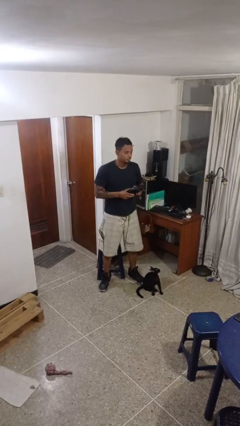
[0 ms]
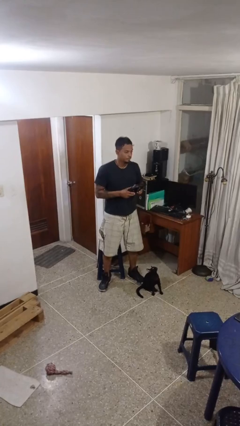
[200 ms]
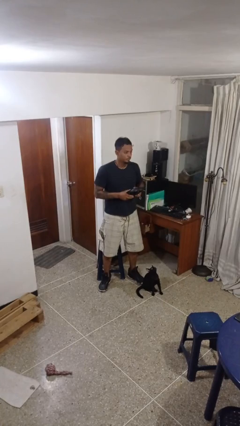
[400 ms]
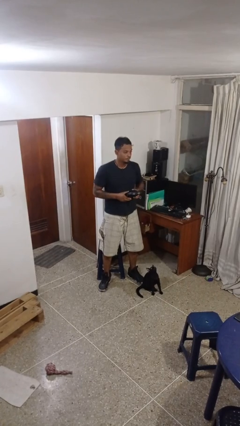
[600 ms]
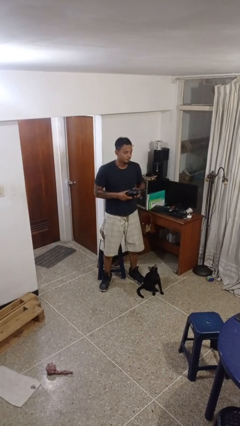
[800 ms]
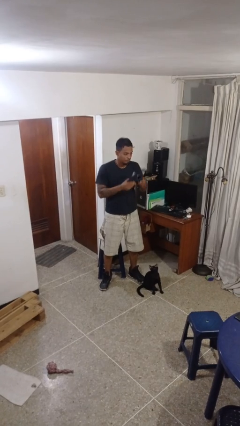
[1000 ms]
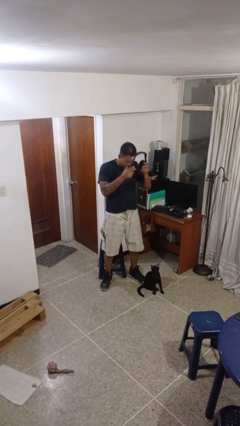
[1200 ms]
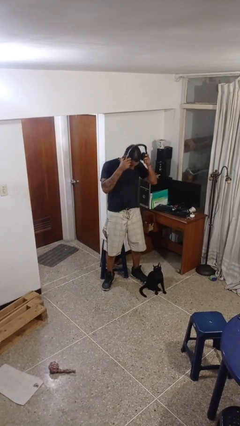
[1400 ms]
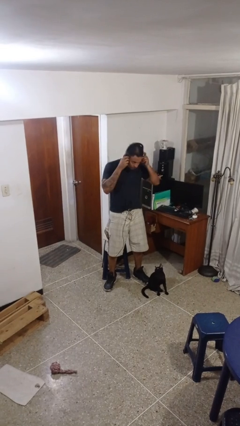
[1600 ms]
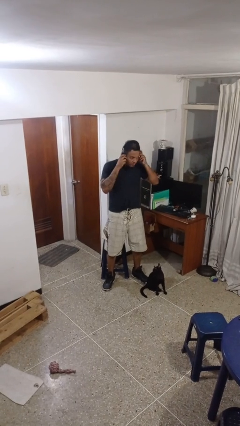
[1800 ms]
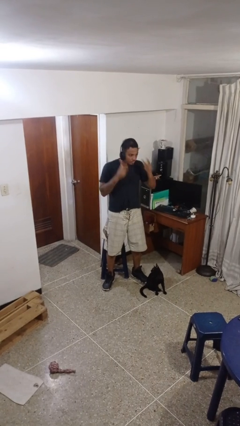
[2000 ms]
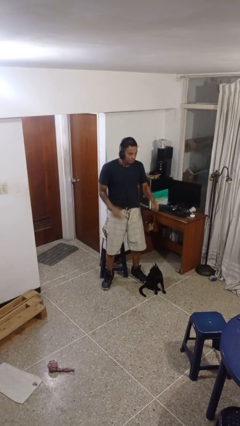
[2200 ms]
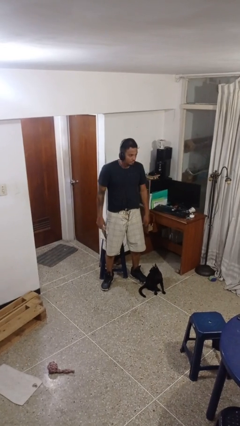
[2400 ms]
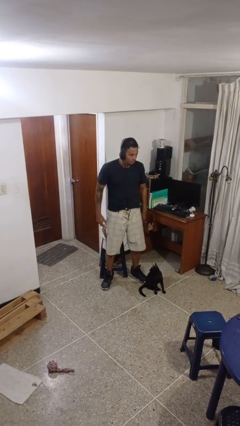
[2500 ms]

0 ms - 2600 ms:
person puts on headphones

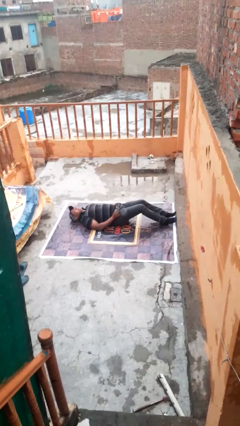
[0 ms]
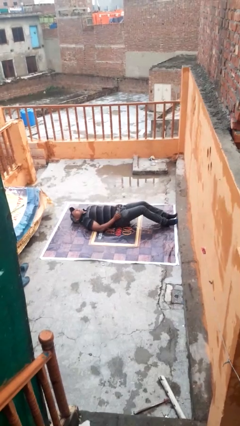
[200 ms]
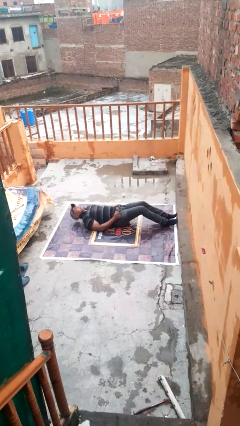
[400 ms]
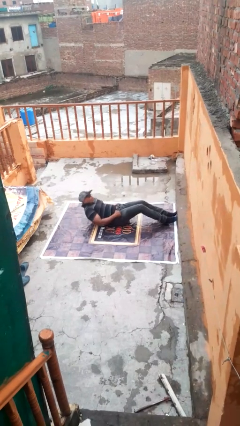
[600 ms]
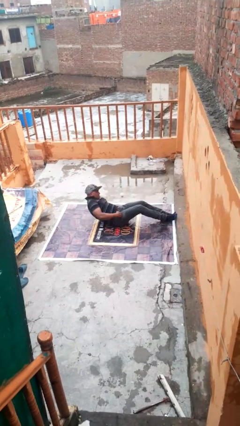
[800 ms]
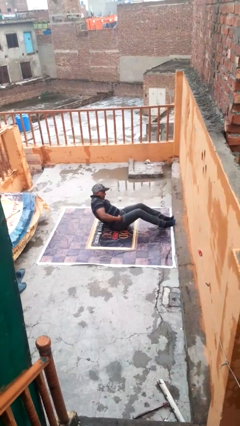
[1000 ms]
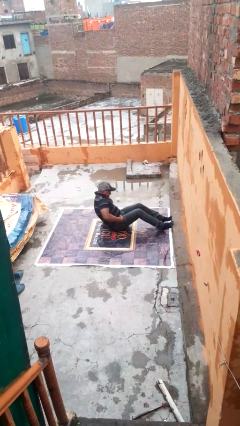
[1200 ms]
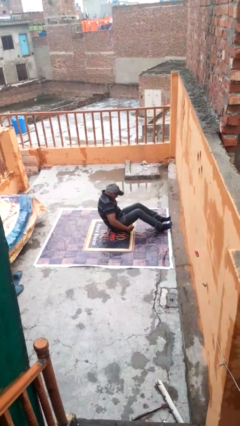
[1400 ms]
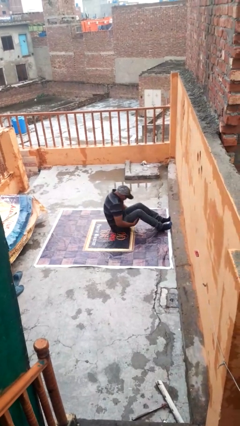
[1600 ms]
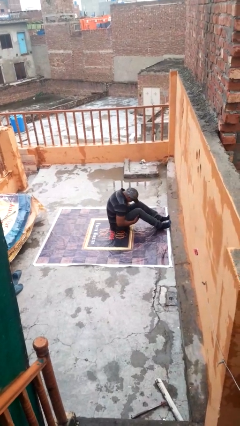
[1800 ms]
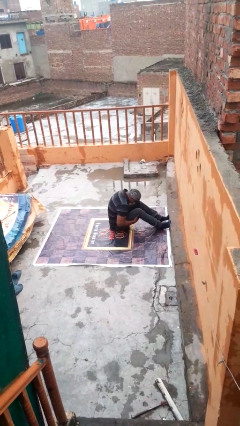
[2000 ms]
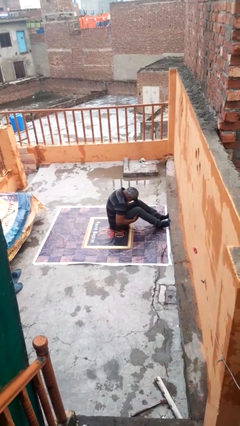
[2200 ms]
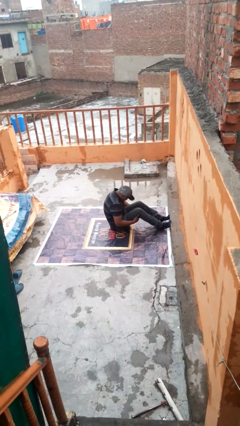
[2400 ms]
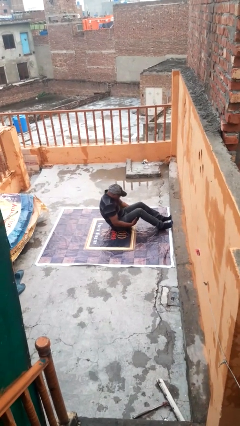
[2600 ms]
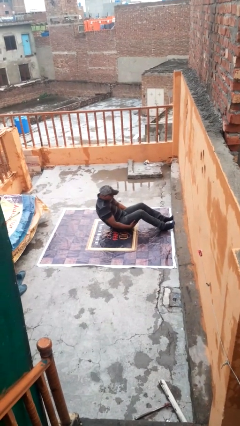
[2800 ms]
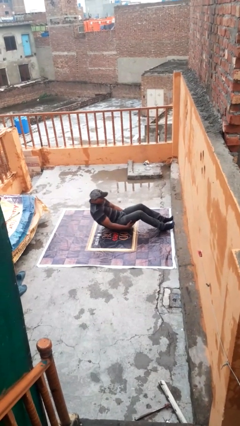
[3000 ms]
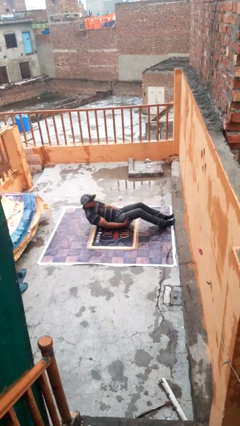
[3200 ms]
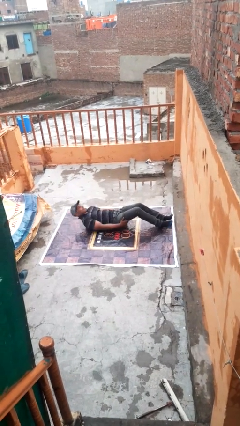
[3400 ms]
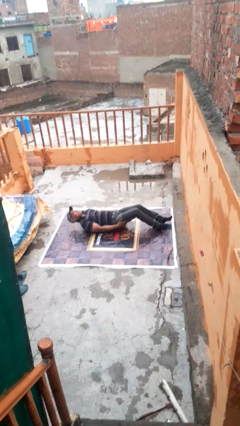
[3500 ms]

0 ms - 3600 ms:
person exercises with situp

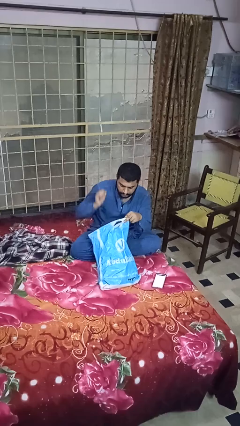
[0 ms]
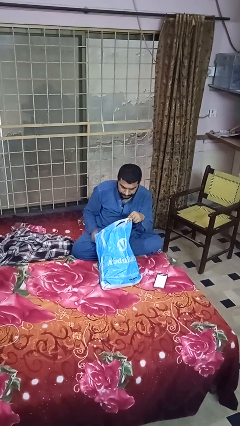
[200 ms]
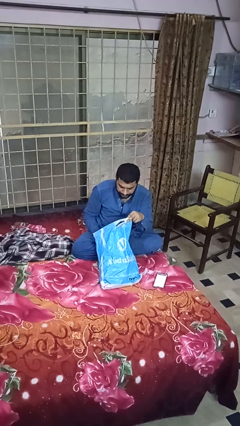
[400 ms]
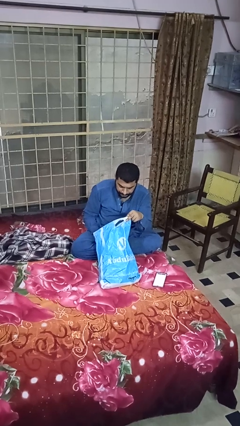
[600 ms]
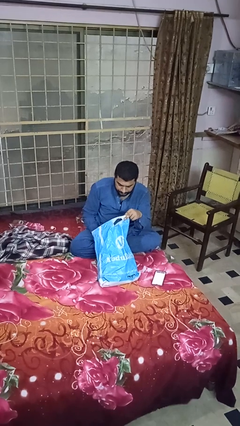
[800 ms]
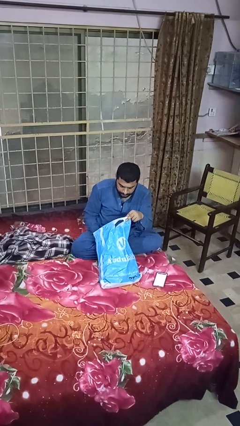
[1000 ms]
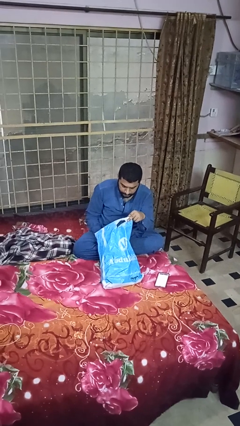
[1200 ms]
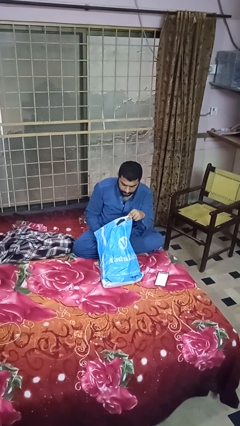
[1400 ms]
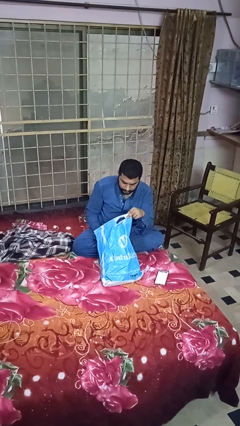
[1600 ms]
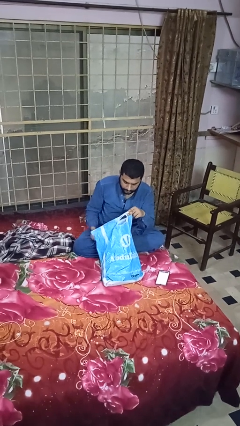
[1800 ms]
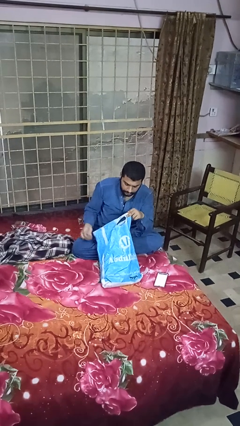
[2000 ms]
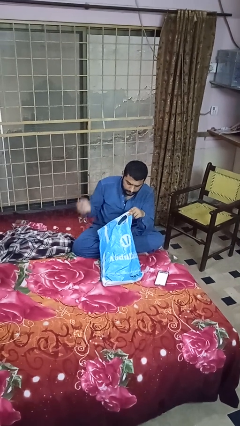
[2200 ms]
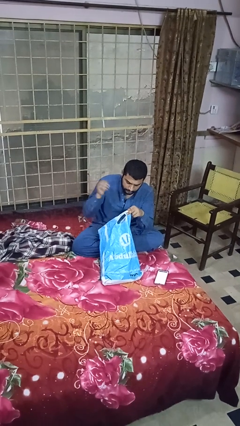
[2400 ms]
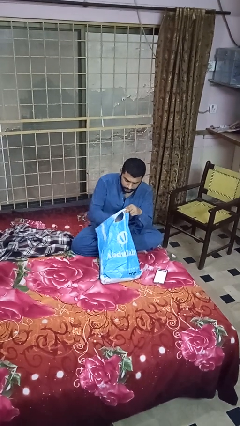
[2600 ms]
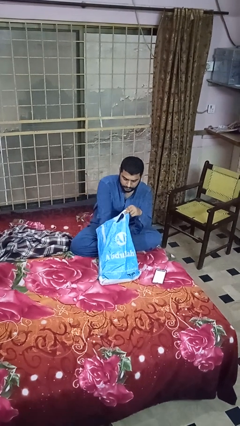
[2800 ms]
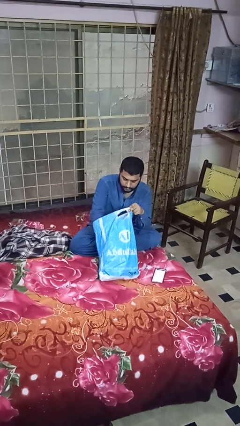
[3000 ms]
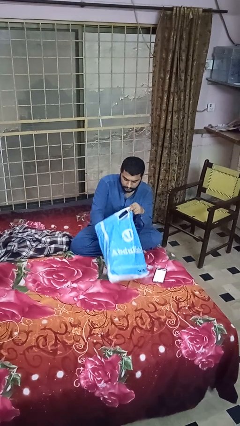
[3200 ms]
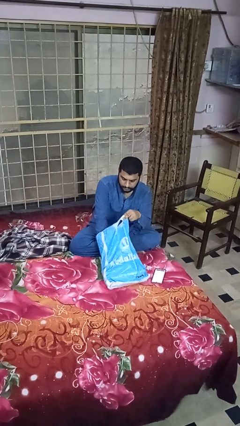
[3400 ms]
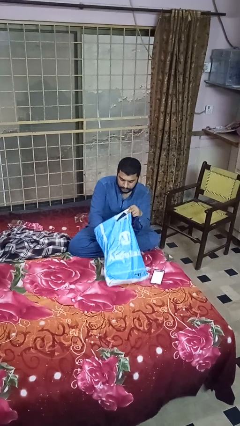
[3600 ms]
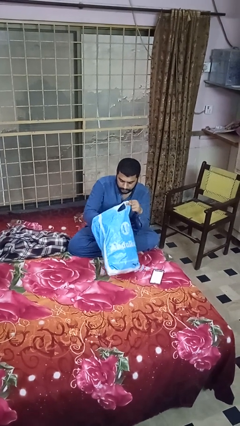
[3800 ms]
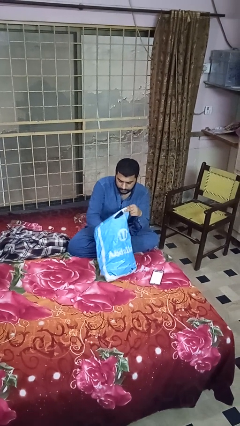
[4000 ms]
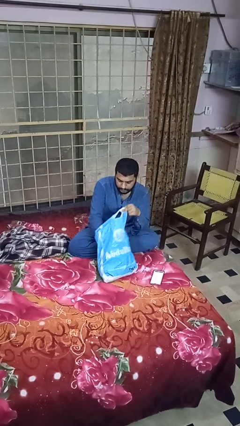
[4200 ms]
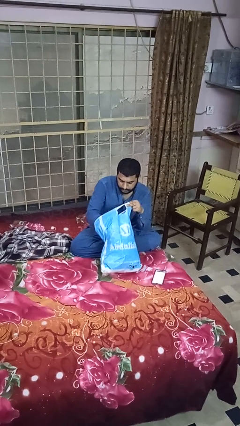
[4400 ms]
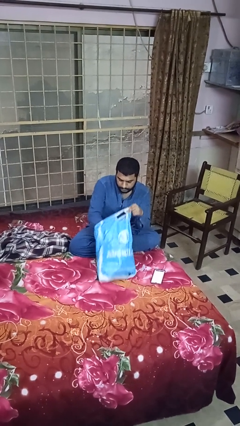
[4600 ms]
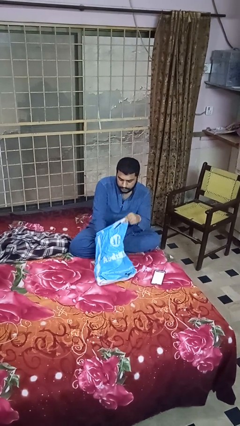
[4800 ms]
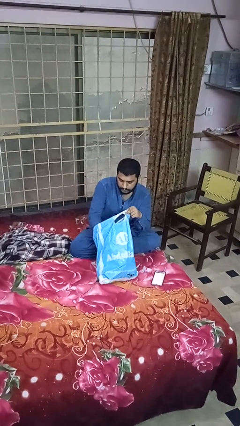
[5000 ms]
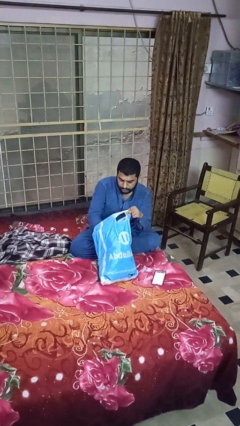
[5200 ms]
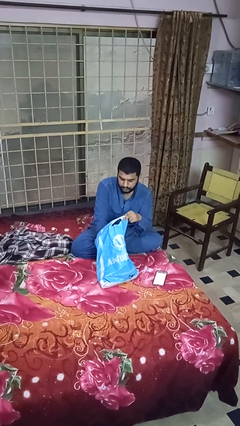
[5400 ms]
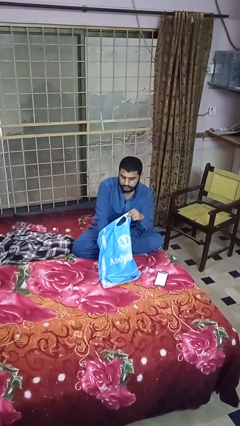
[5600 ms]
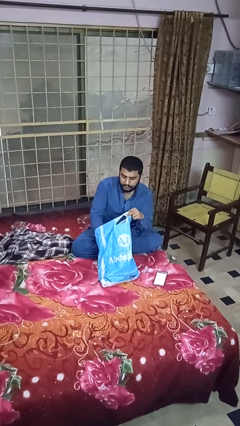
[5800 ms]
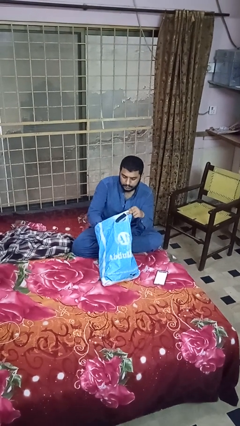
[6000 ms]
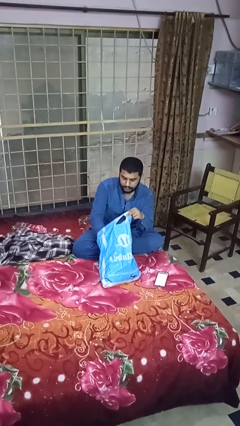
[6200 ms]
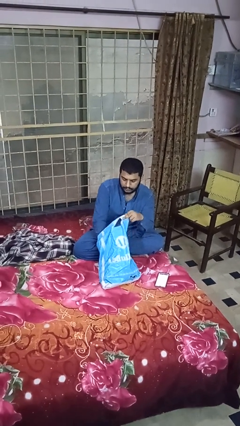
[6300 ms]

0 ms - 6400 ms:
person searches in bag

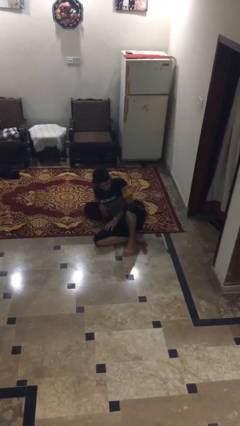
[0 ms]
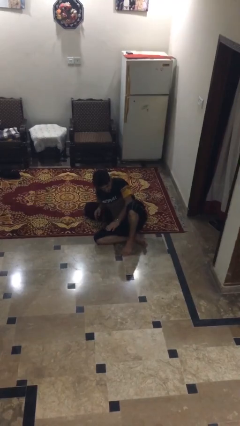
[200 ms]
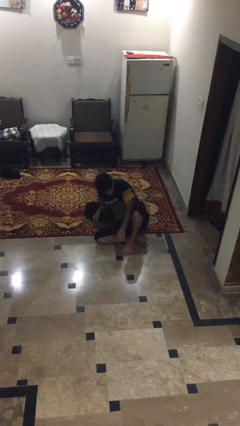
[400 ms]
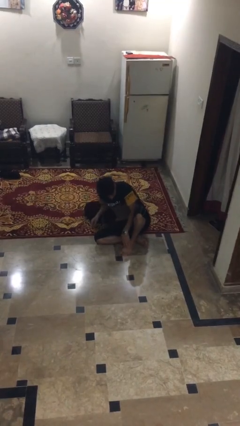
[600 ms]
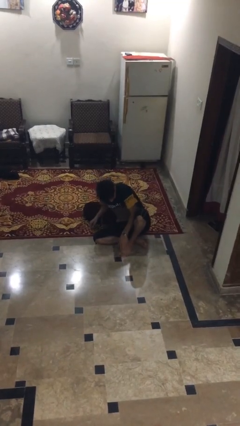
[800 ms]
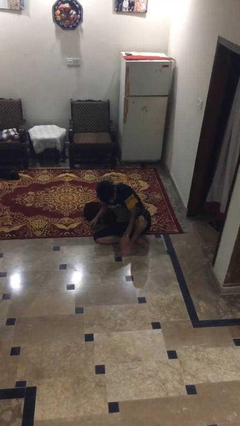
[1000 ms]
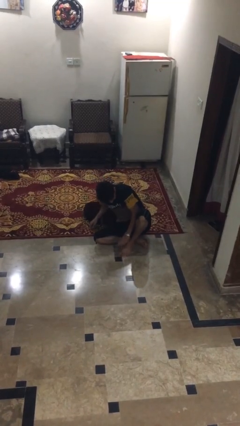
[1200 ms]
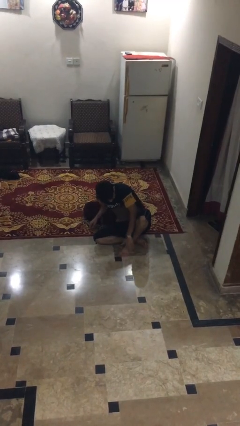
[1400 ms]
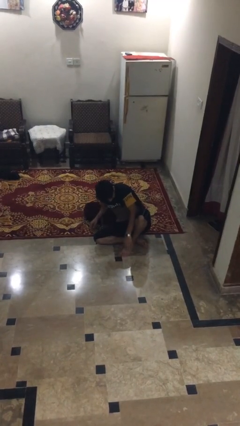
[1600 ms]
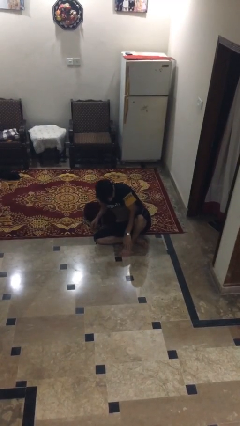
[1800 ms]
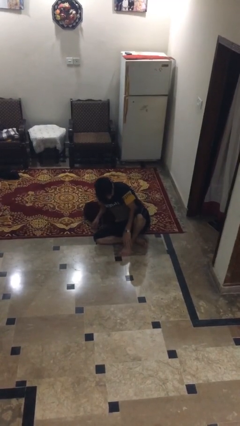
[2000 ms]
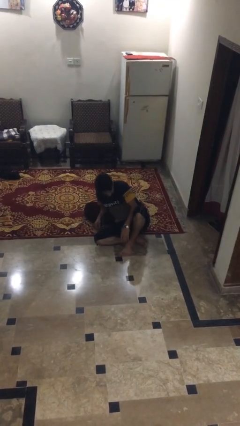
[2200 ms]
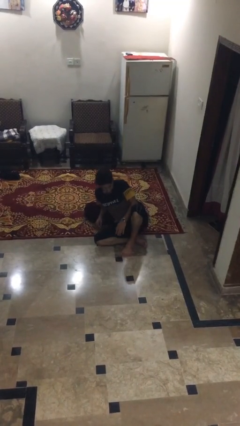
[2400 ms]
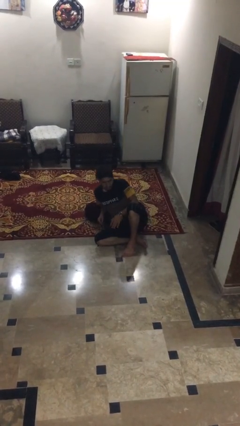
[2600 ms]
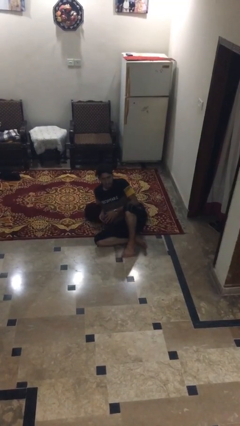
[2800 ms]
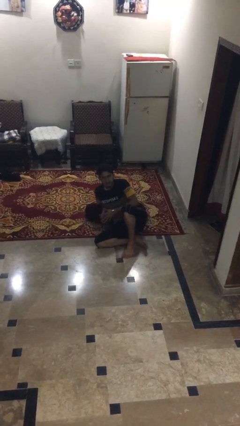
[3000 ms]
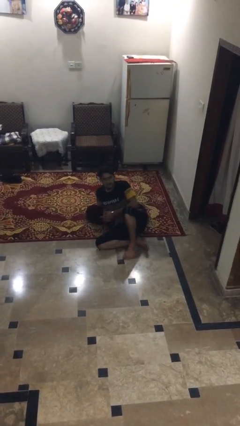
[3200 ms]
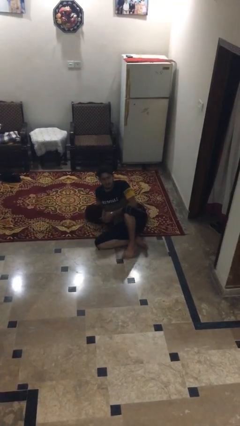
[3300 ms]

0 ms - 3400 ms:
person swats bug

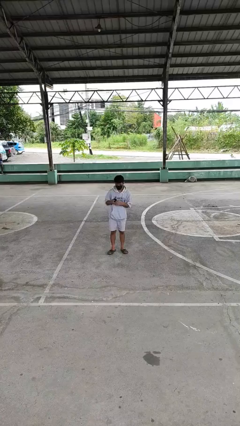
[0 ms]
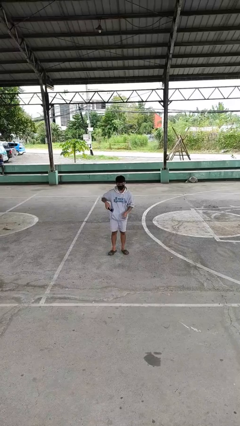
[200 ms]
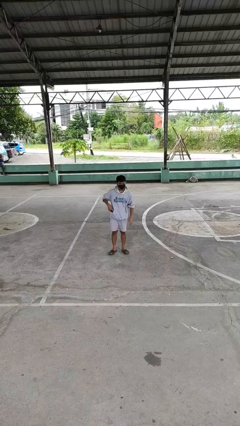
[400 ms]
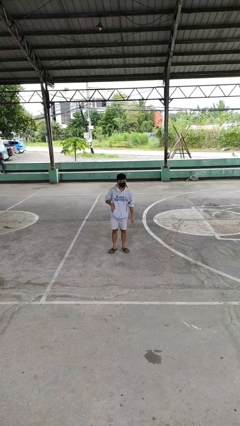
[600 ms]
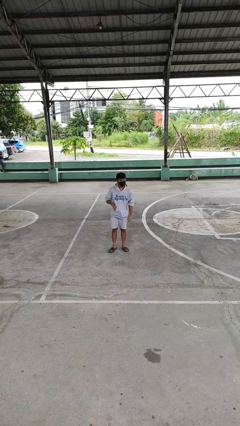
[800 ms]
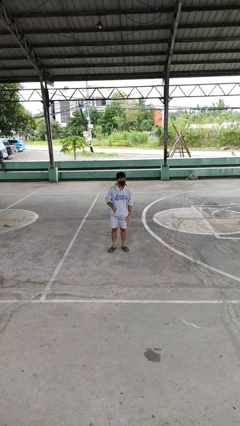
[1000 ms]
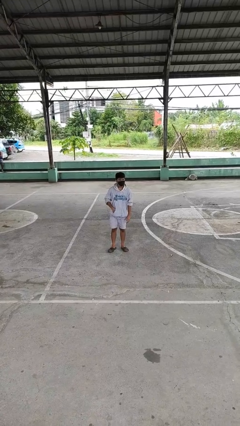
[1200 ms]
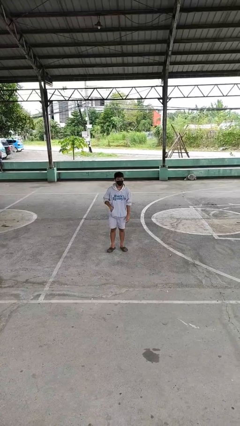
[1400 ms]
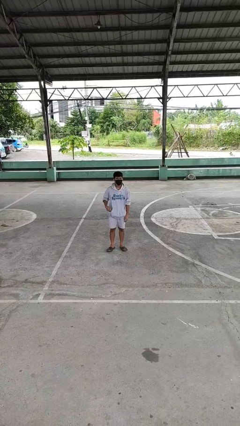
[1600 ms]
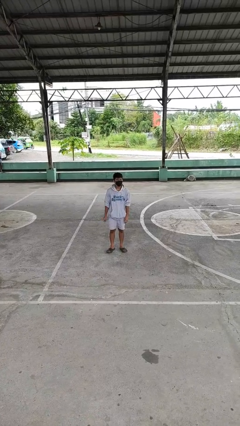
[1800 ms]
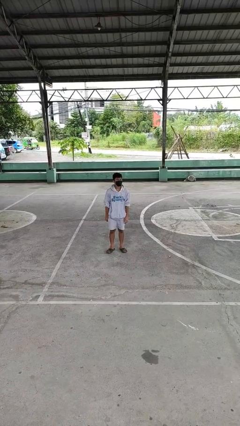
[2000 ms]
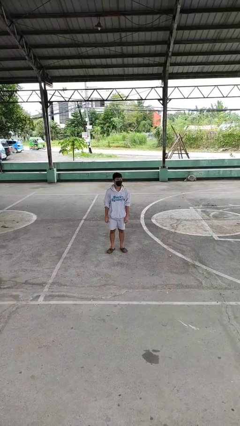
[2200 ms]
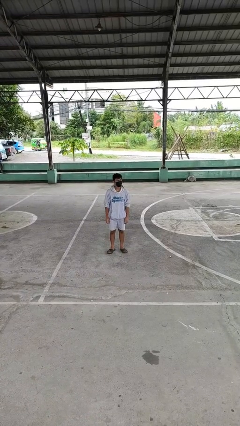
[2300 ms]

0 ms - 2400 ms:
person puts phone into pocket
